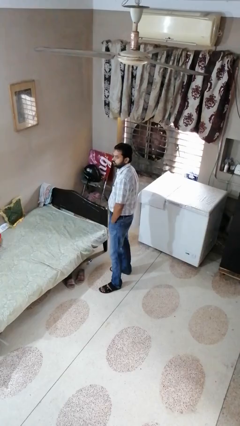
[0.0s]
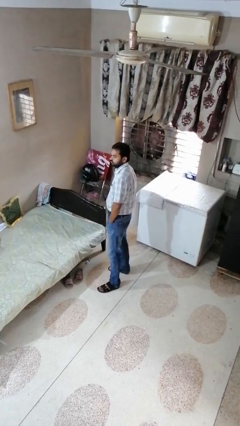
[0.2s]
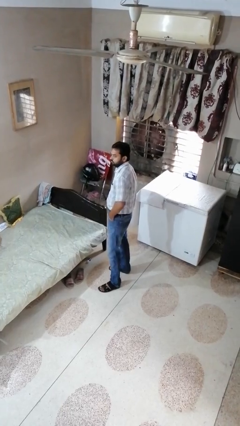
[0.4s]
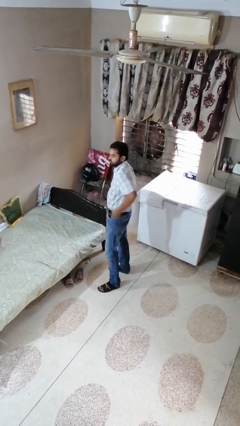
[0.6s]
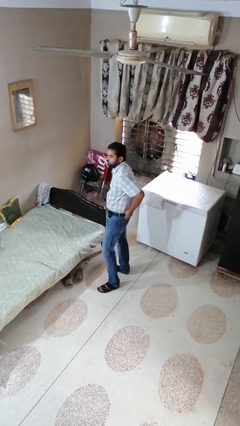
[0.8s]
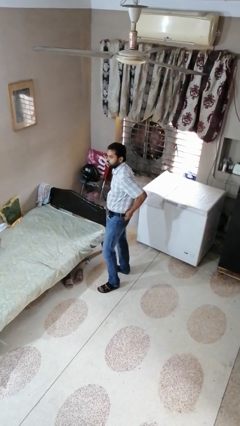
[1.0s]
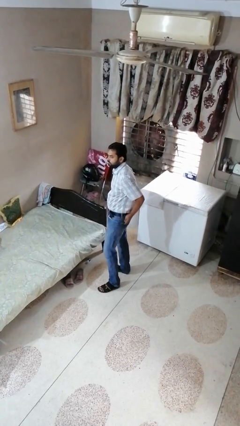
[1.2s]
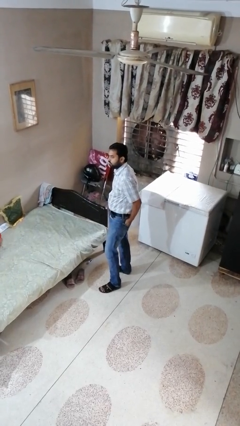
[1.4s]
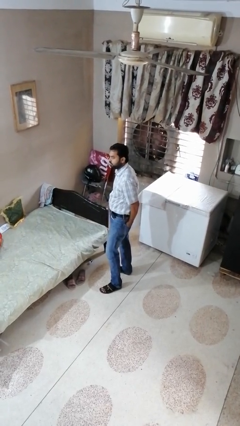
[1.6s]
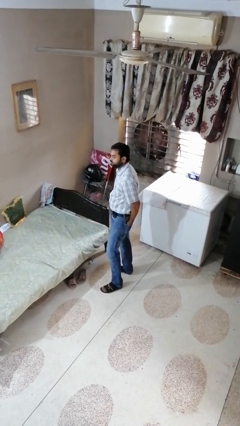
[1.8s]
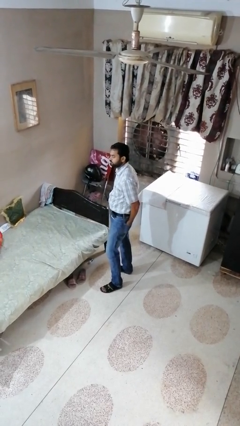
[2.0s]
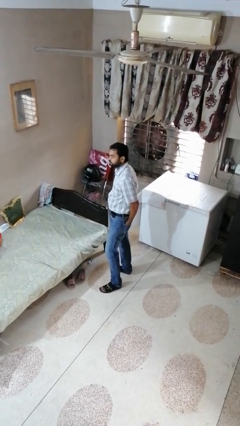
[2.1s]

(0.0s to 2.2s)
person puts hands in back pockets

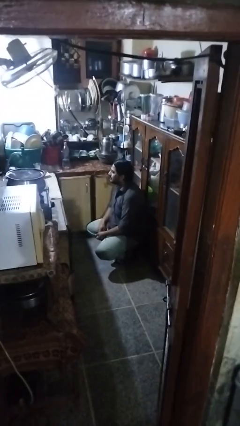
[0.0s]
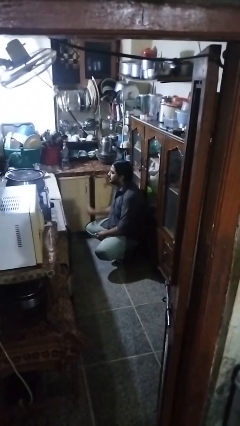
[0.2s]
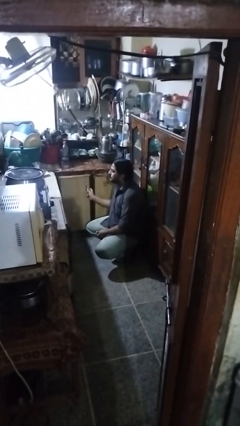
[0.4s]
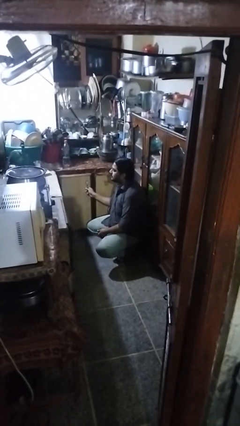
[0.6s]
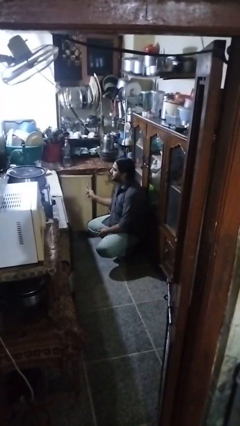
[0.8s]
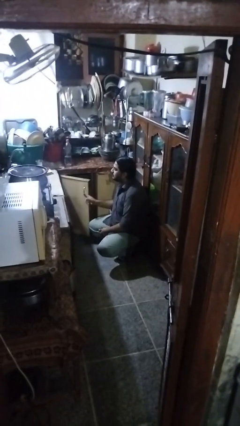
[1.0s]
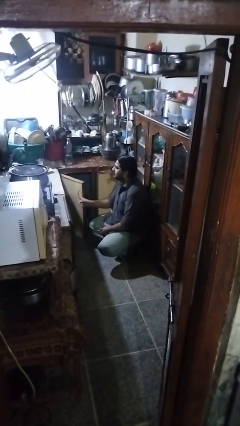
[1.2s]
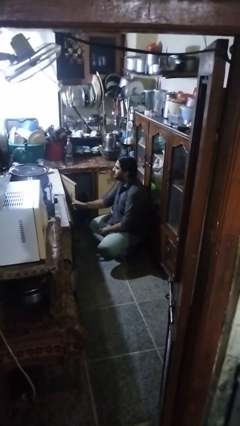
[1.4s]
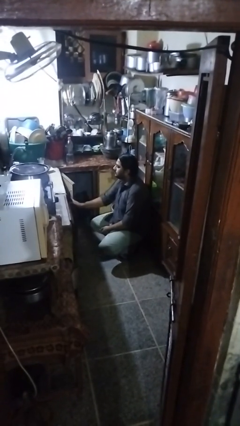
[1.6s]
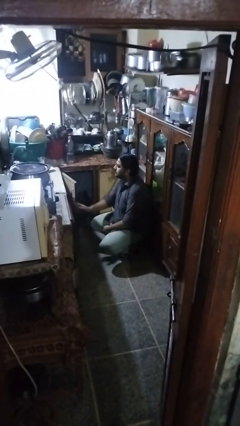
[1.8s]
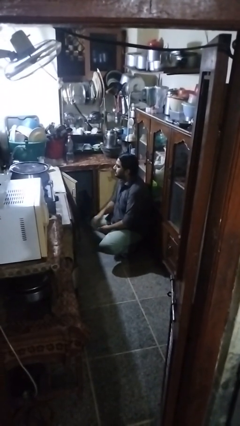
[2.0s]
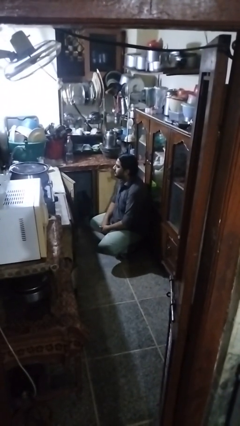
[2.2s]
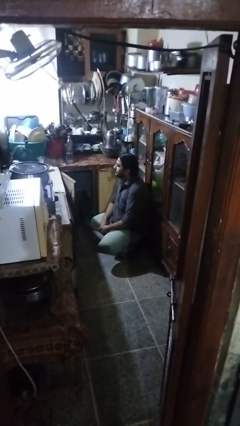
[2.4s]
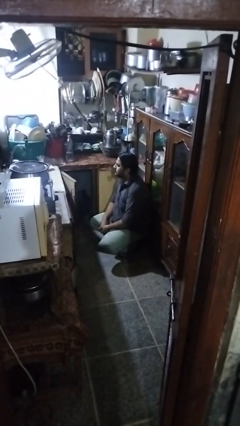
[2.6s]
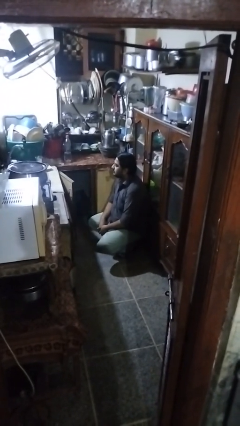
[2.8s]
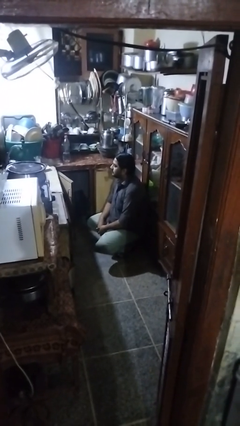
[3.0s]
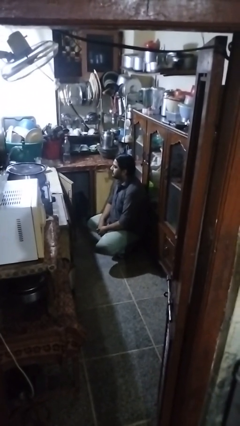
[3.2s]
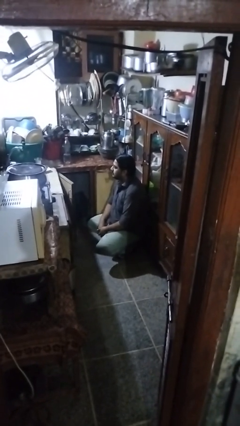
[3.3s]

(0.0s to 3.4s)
person opens cabinet

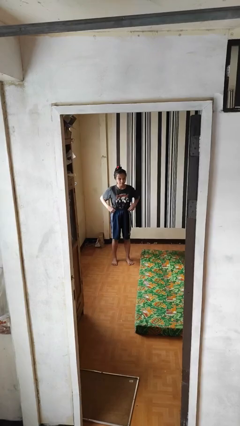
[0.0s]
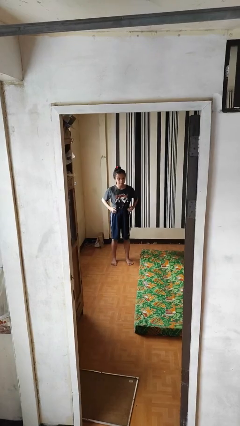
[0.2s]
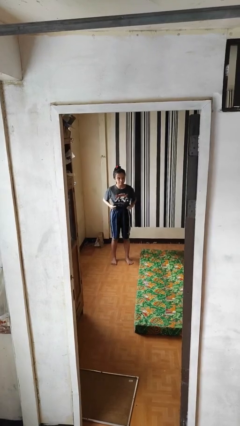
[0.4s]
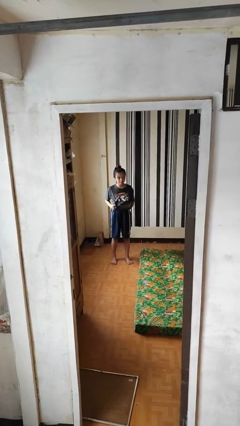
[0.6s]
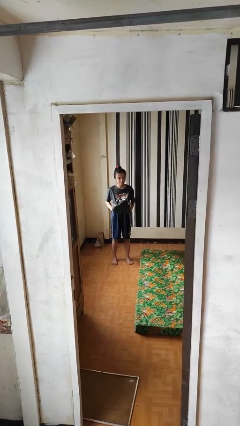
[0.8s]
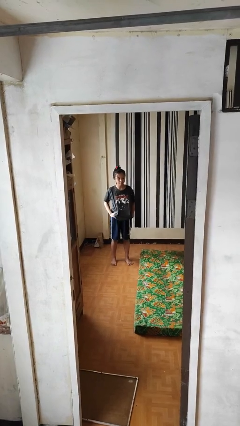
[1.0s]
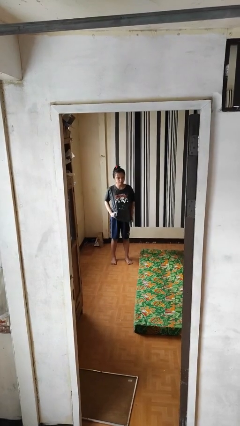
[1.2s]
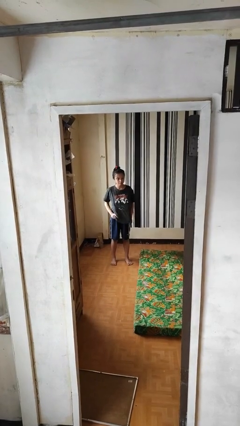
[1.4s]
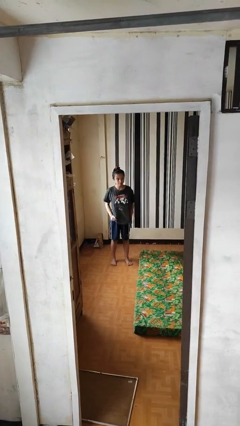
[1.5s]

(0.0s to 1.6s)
person untucks shirt

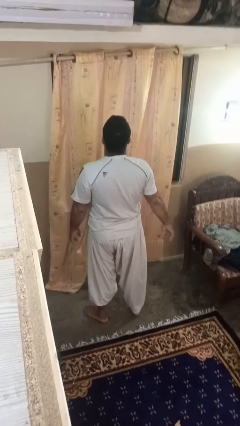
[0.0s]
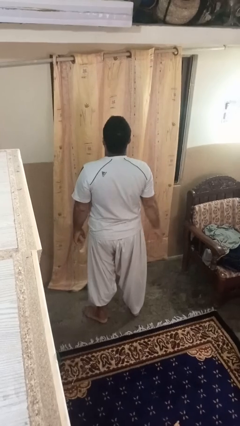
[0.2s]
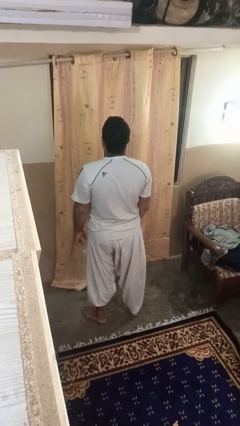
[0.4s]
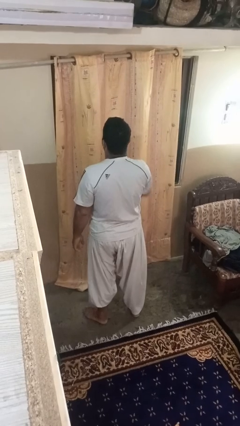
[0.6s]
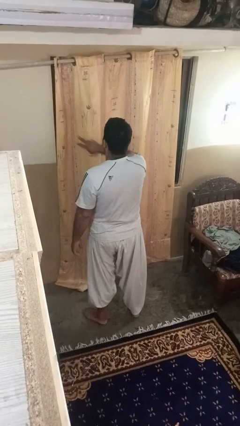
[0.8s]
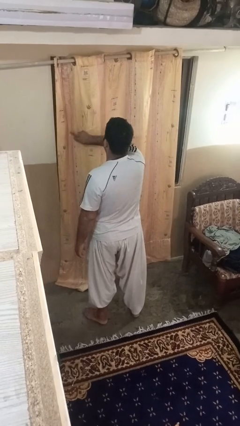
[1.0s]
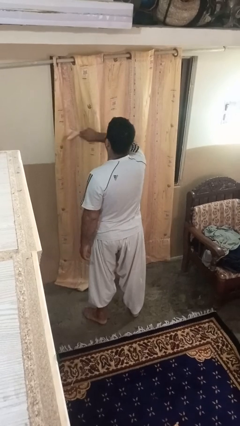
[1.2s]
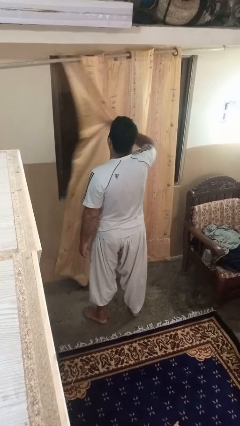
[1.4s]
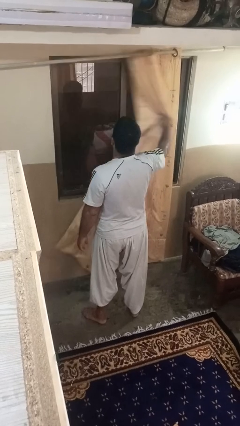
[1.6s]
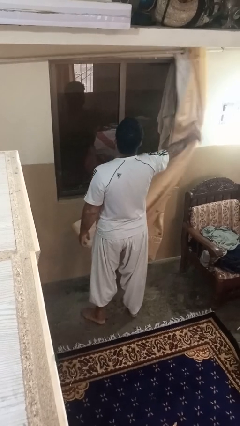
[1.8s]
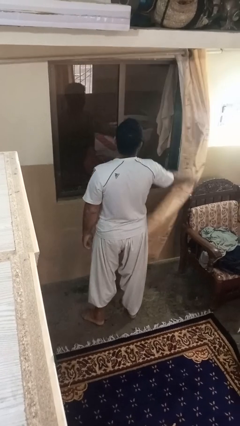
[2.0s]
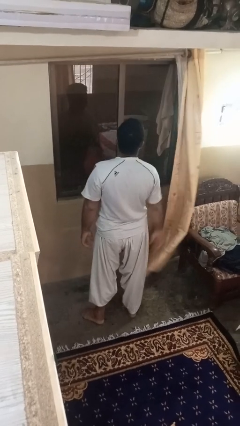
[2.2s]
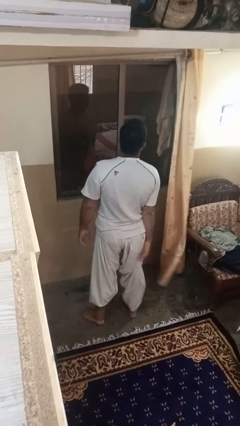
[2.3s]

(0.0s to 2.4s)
person opens curtains

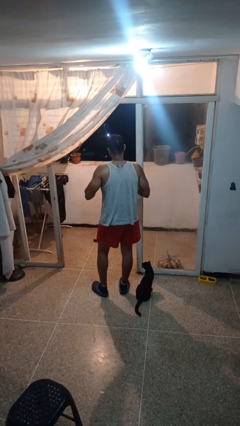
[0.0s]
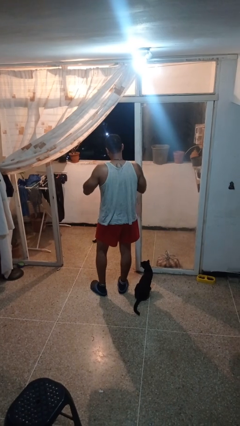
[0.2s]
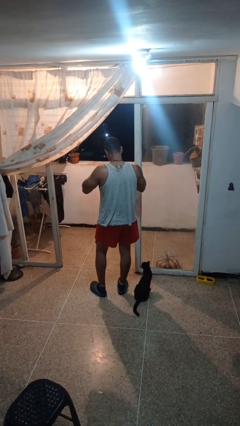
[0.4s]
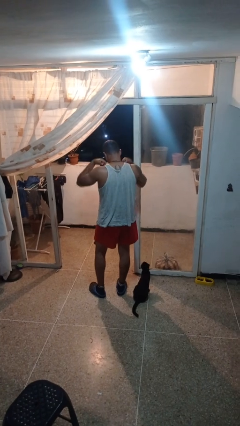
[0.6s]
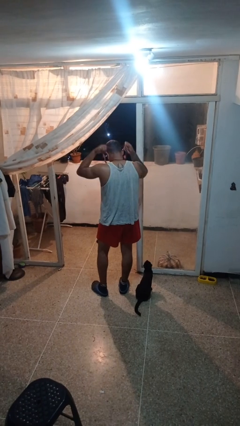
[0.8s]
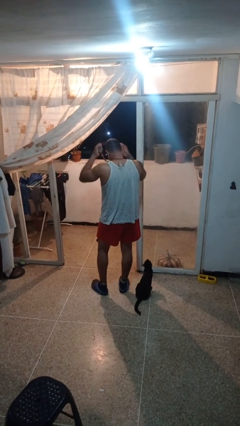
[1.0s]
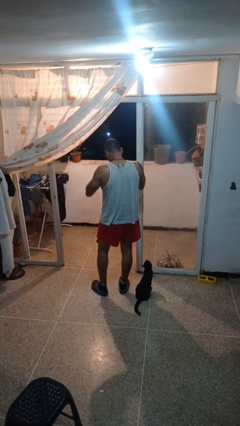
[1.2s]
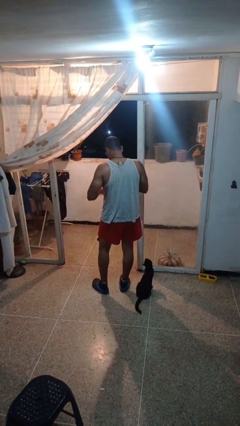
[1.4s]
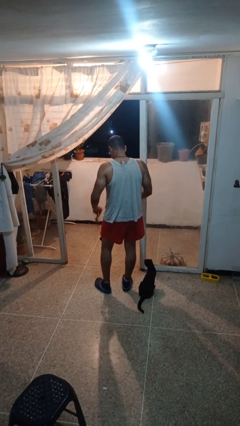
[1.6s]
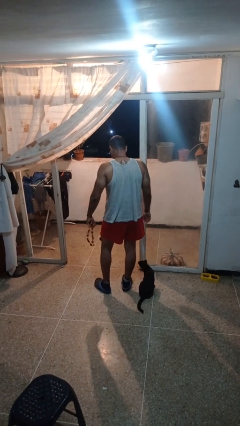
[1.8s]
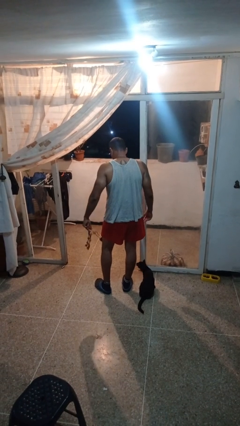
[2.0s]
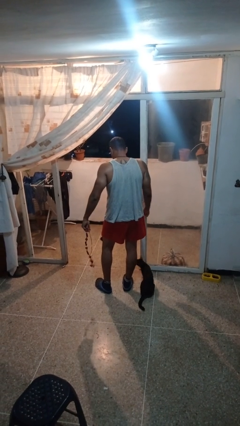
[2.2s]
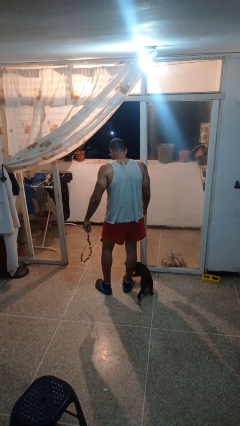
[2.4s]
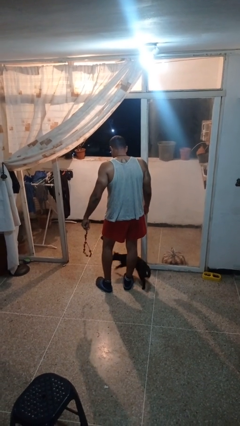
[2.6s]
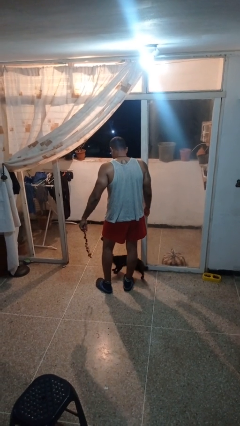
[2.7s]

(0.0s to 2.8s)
person takes off necklace

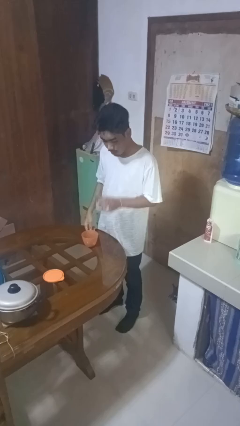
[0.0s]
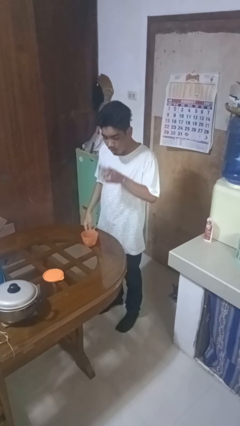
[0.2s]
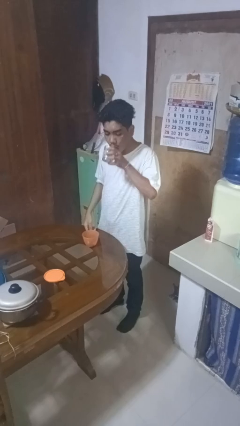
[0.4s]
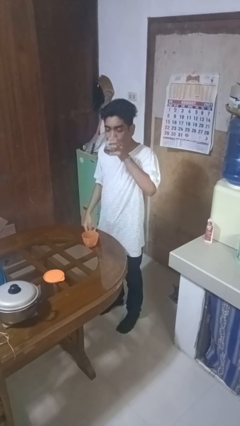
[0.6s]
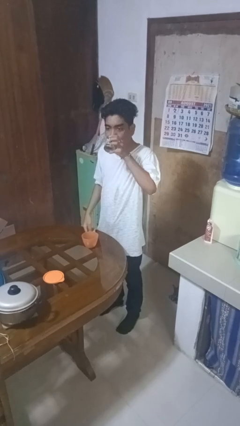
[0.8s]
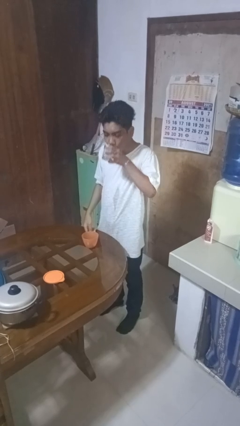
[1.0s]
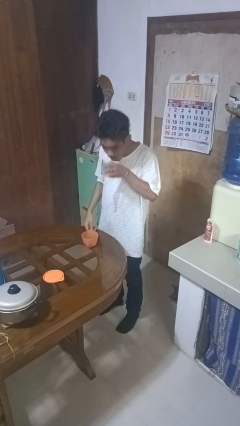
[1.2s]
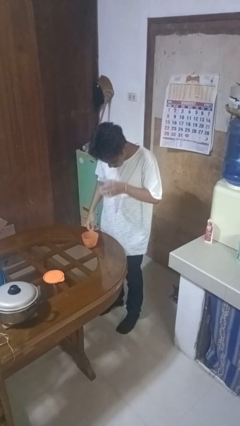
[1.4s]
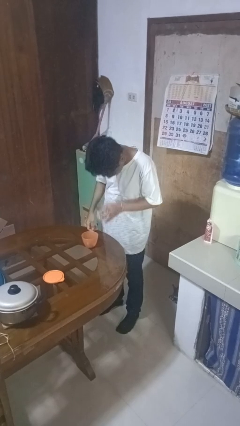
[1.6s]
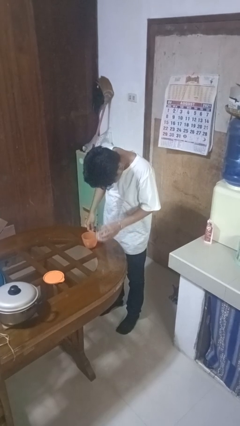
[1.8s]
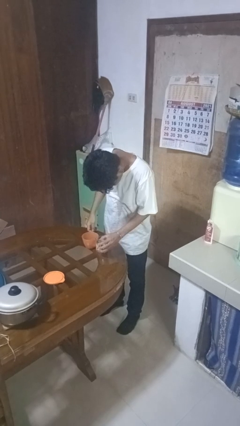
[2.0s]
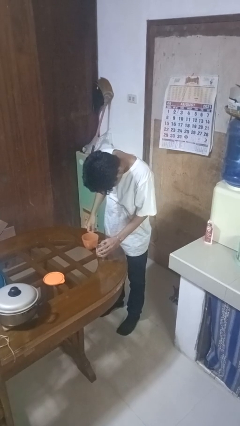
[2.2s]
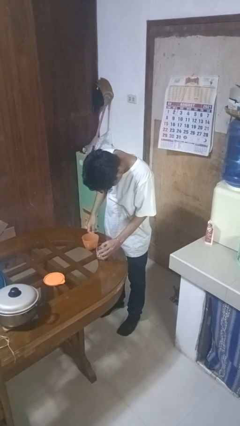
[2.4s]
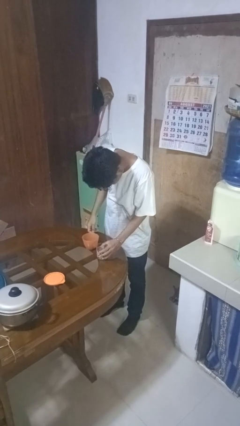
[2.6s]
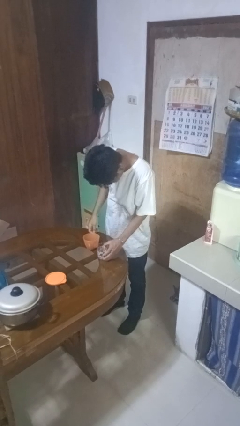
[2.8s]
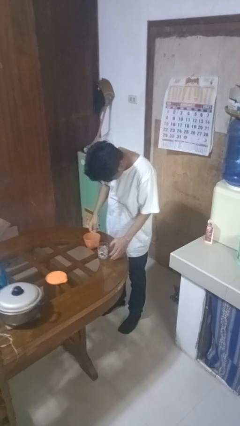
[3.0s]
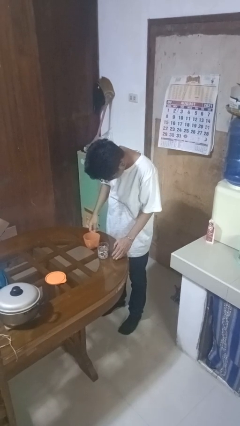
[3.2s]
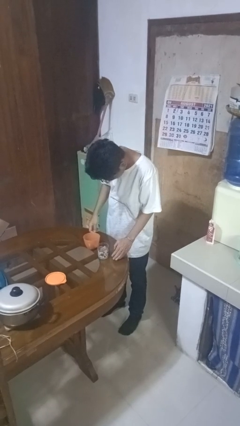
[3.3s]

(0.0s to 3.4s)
person drinks from cup

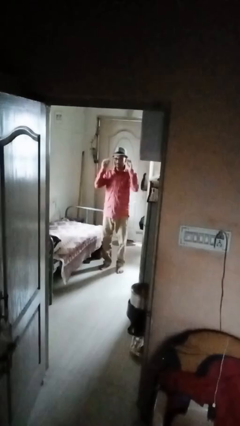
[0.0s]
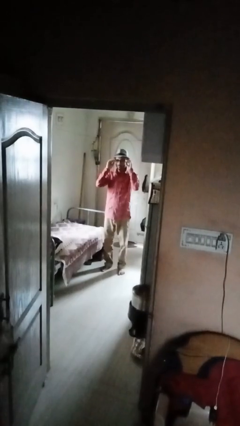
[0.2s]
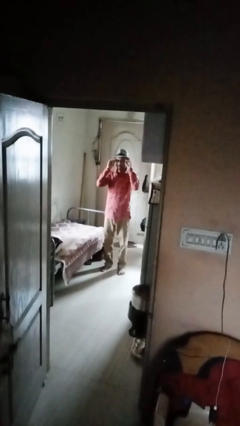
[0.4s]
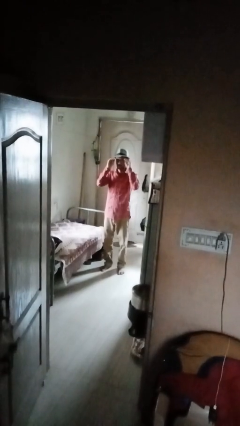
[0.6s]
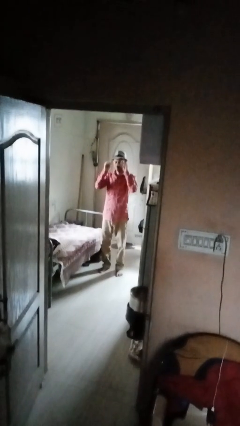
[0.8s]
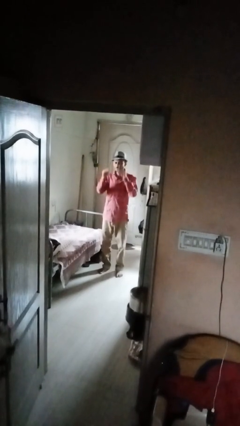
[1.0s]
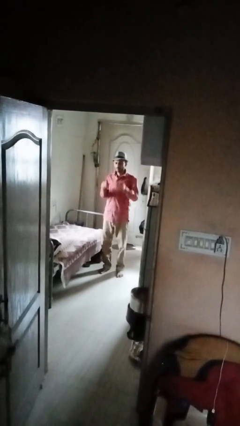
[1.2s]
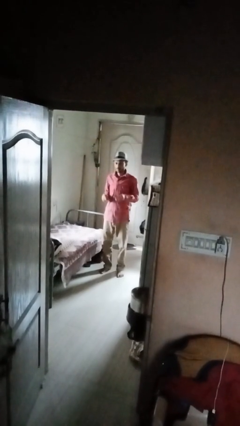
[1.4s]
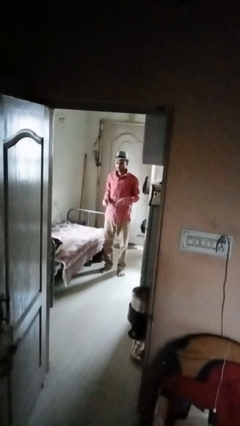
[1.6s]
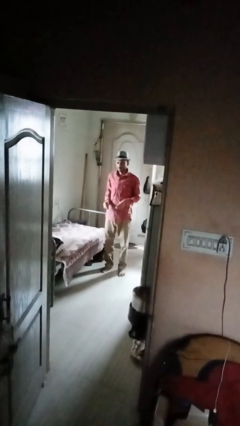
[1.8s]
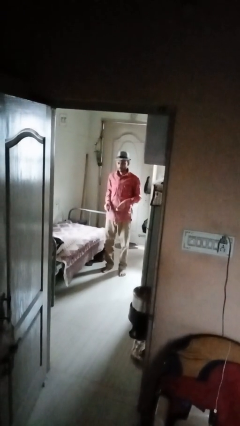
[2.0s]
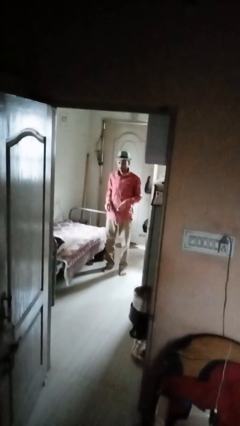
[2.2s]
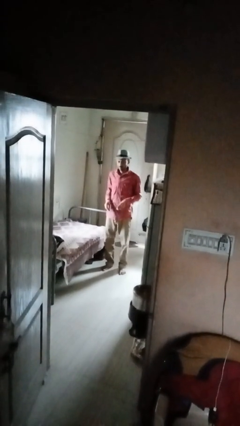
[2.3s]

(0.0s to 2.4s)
person takes off glasses
